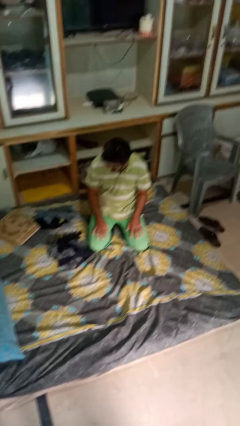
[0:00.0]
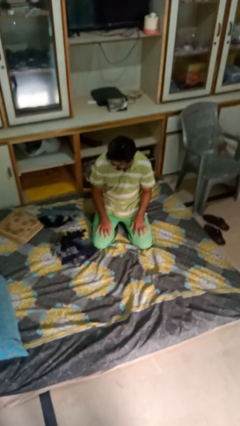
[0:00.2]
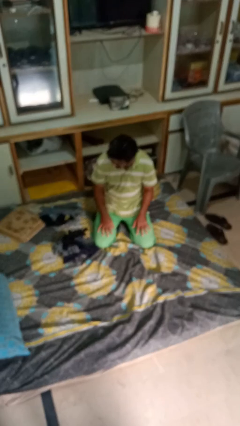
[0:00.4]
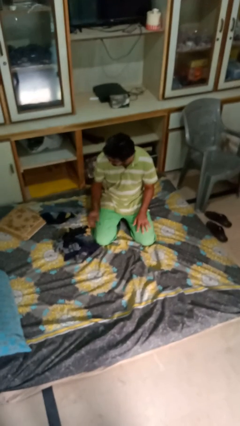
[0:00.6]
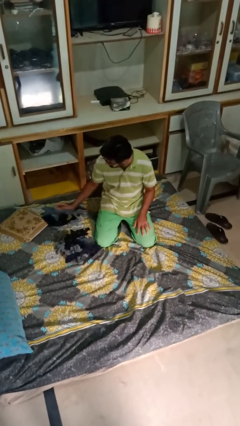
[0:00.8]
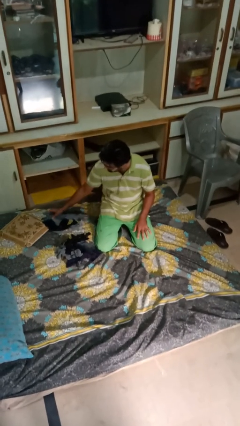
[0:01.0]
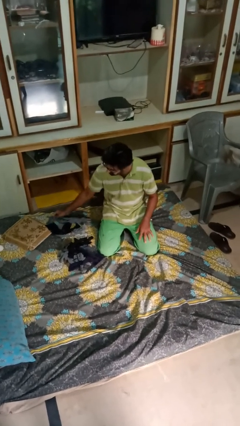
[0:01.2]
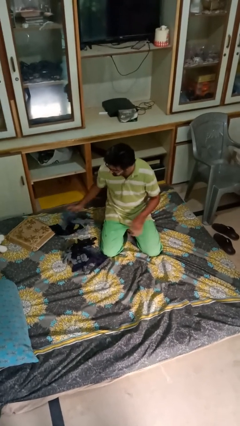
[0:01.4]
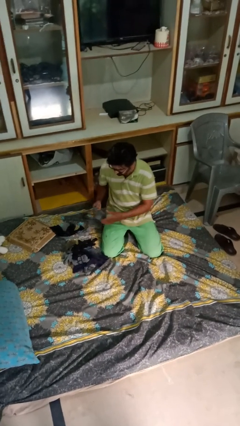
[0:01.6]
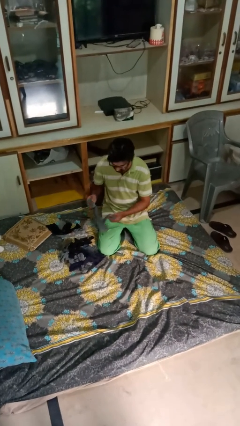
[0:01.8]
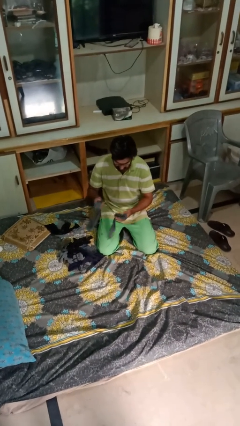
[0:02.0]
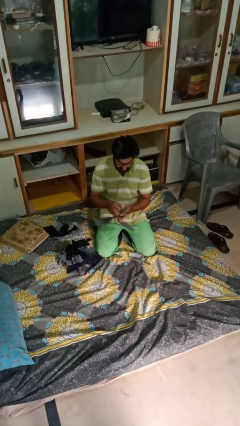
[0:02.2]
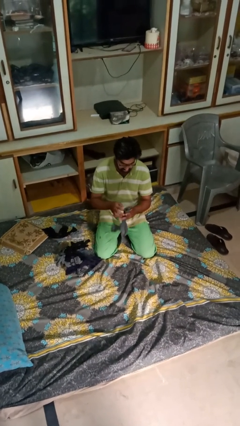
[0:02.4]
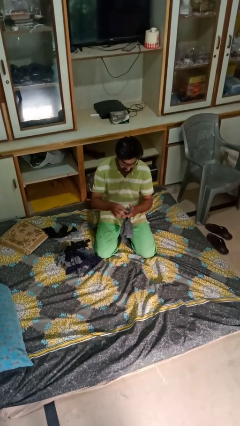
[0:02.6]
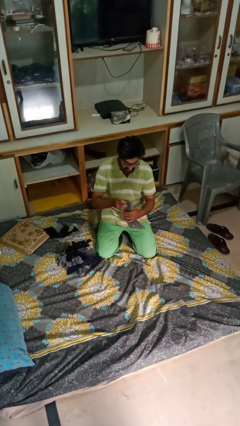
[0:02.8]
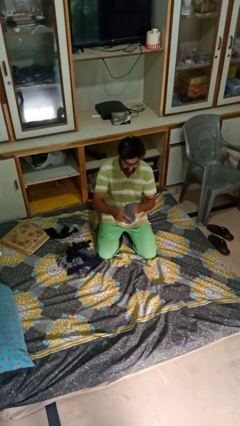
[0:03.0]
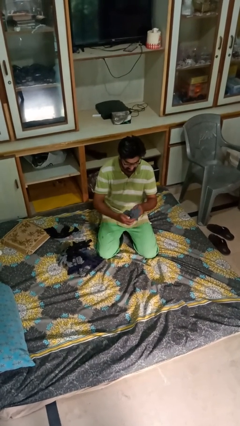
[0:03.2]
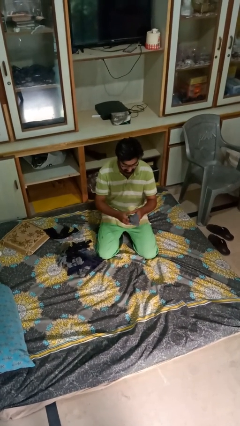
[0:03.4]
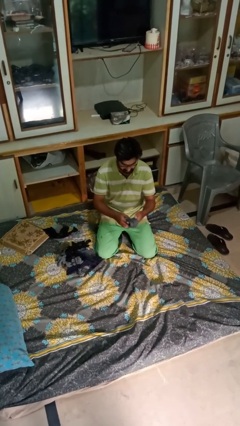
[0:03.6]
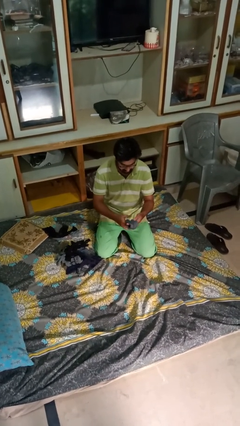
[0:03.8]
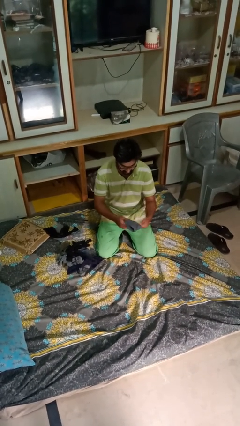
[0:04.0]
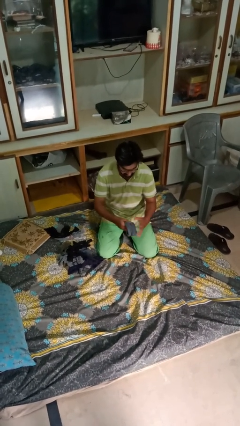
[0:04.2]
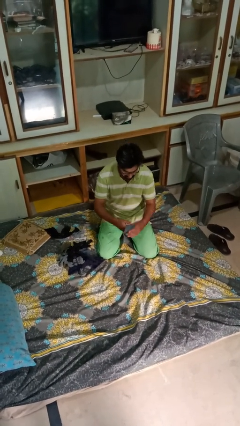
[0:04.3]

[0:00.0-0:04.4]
person folds socks

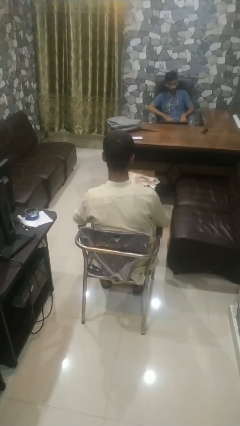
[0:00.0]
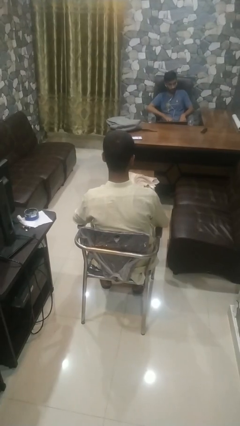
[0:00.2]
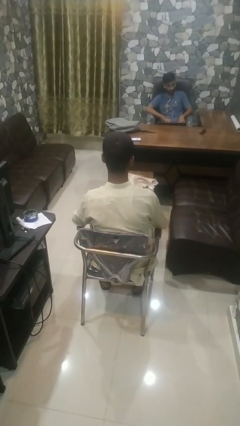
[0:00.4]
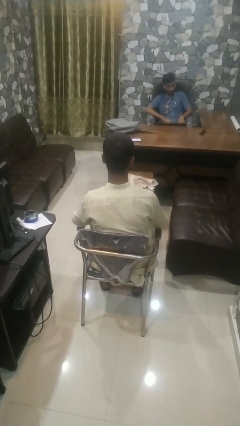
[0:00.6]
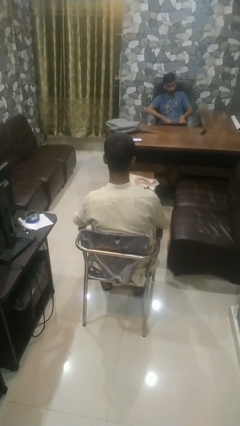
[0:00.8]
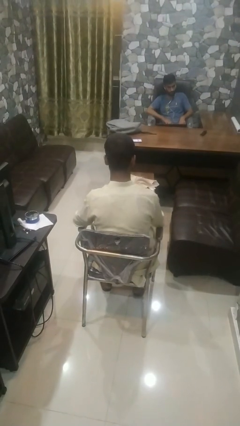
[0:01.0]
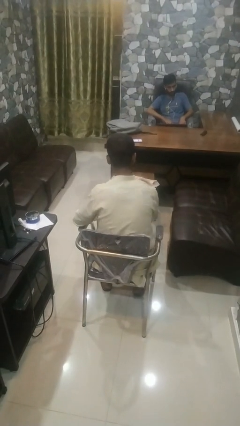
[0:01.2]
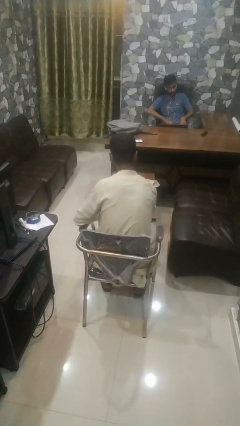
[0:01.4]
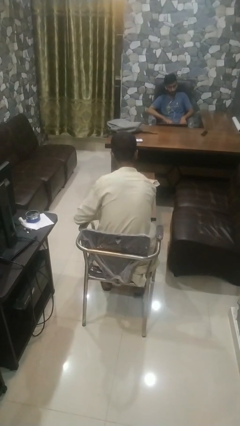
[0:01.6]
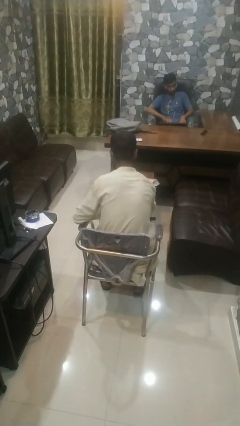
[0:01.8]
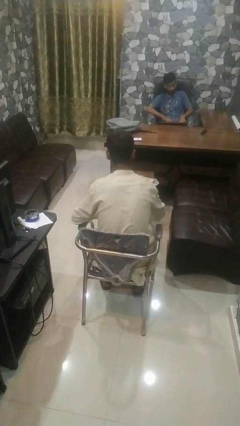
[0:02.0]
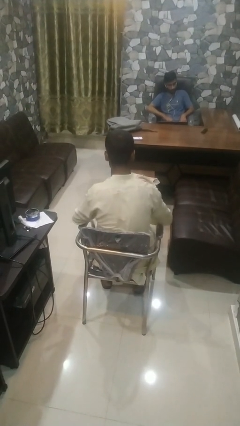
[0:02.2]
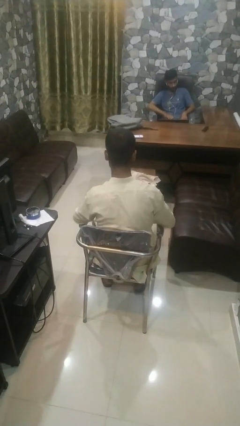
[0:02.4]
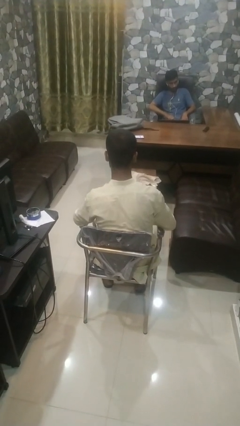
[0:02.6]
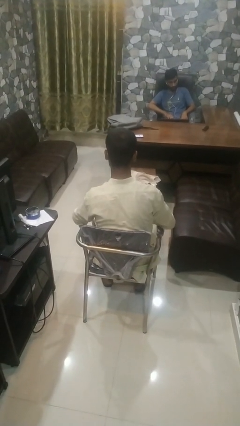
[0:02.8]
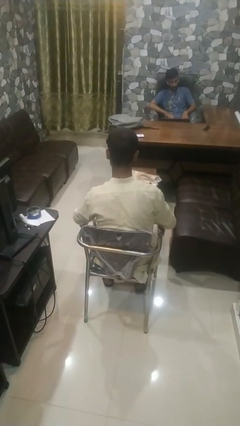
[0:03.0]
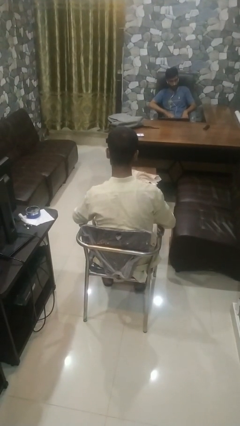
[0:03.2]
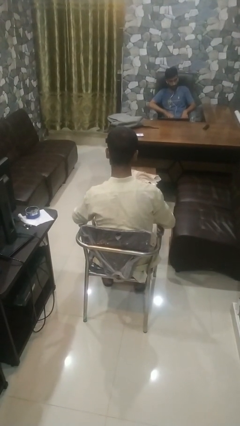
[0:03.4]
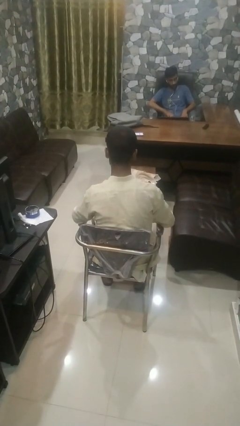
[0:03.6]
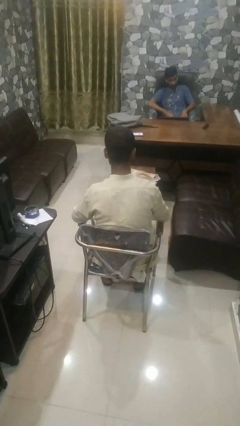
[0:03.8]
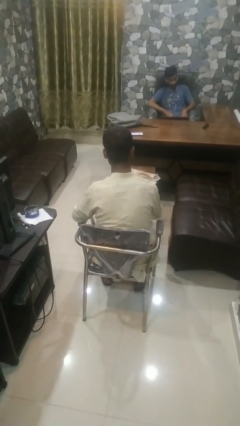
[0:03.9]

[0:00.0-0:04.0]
person paints fingernails

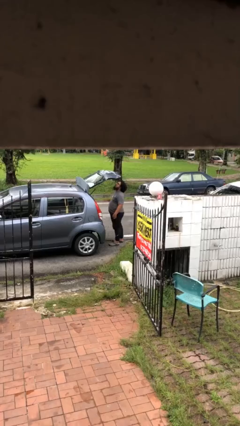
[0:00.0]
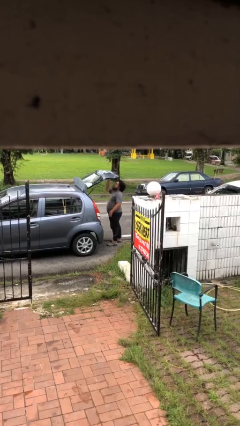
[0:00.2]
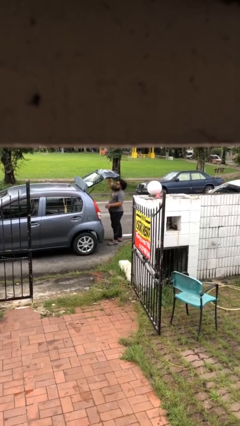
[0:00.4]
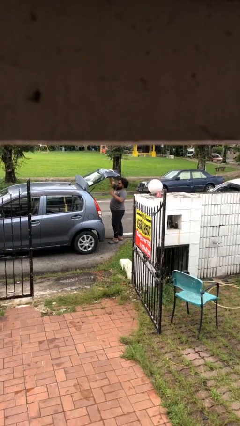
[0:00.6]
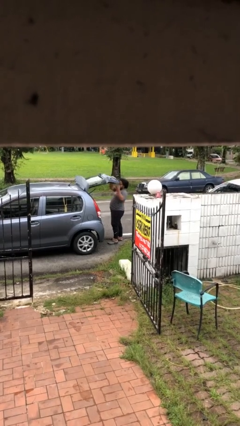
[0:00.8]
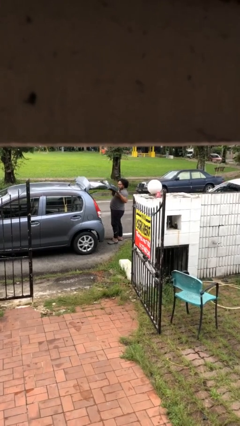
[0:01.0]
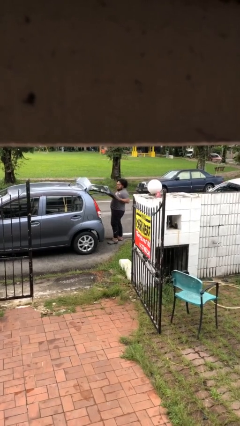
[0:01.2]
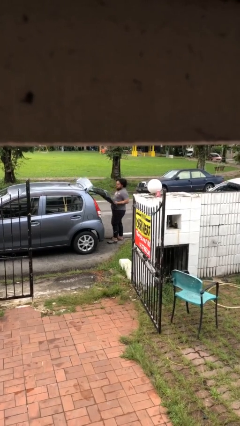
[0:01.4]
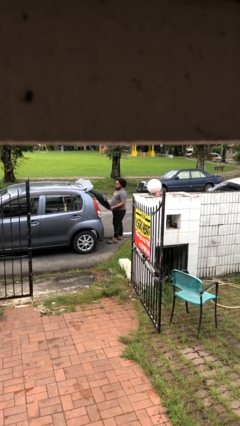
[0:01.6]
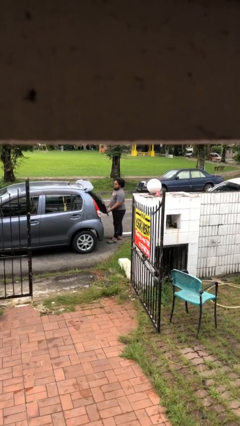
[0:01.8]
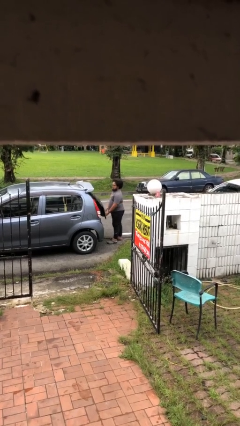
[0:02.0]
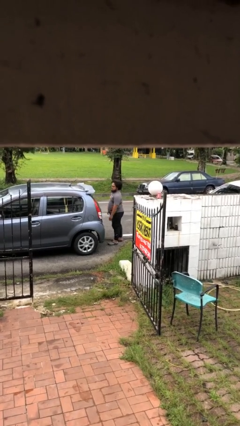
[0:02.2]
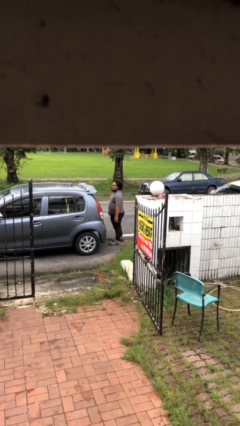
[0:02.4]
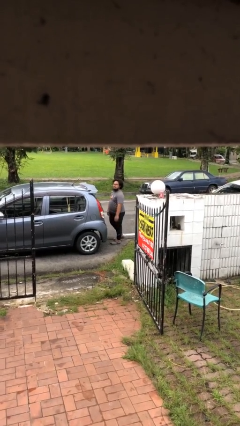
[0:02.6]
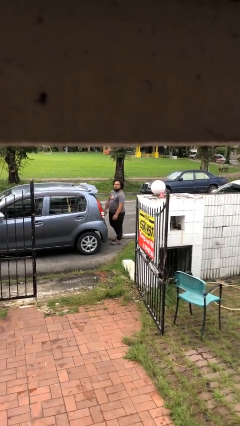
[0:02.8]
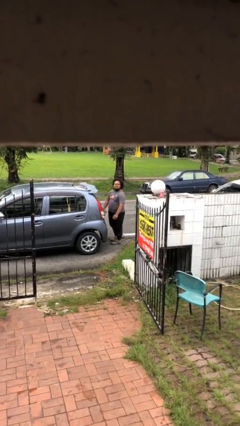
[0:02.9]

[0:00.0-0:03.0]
person closes car trunk

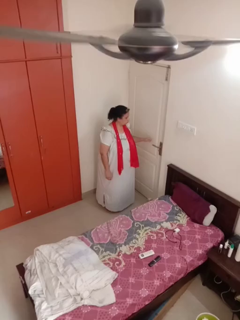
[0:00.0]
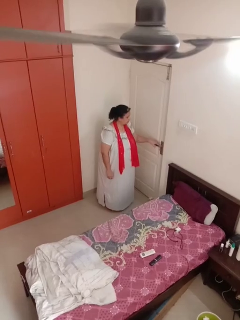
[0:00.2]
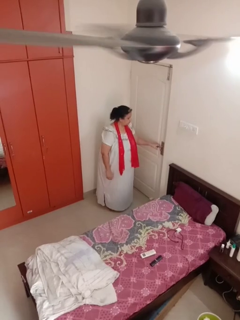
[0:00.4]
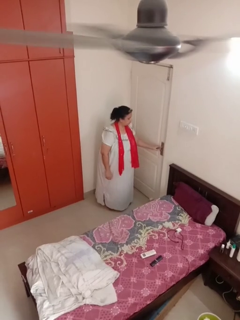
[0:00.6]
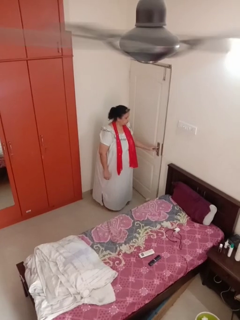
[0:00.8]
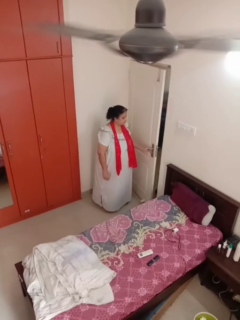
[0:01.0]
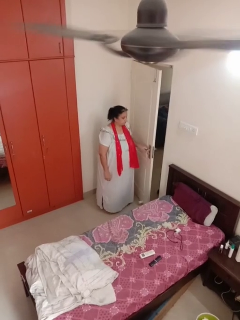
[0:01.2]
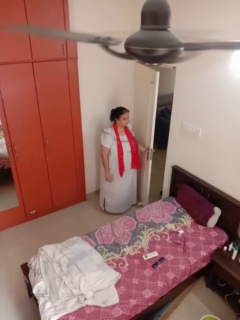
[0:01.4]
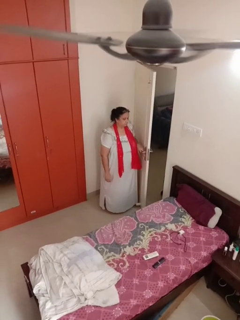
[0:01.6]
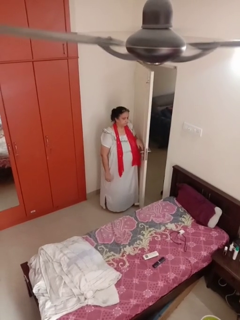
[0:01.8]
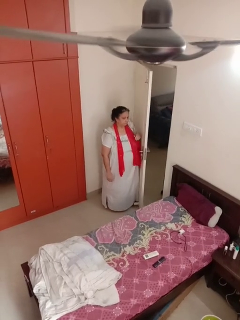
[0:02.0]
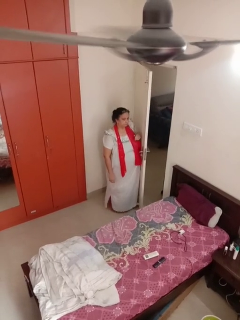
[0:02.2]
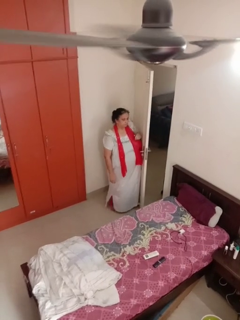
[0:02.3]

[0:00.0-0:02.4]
person opens facility door

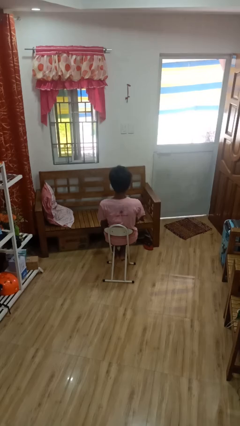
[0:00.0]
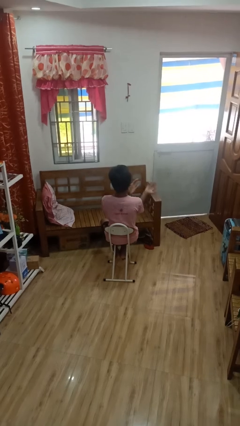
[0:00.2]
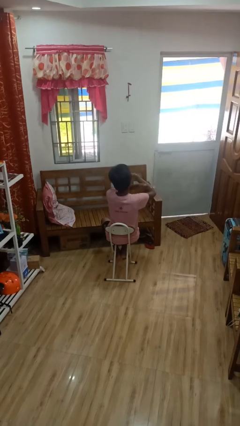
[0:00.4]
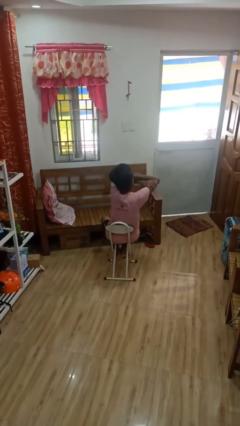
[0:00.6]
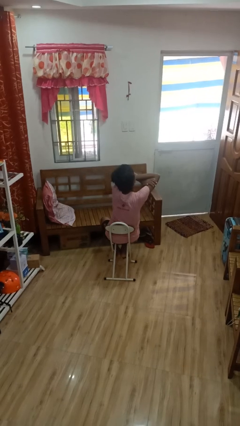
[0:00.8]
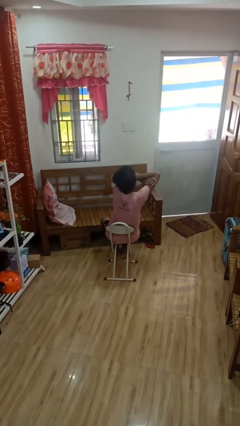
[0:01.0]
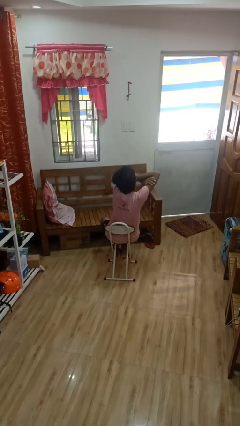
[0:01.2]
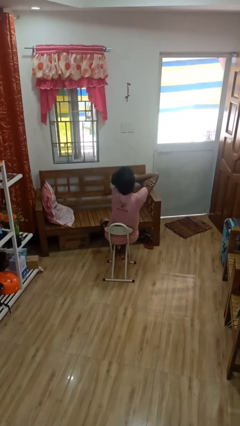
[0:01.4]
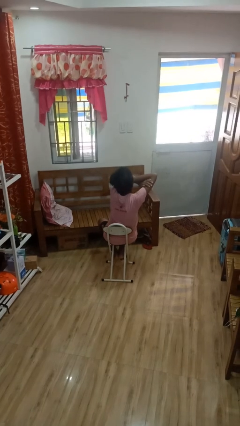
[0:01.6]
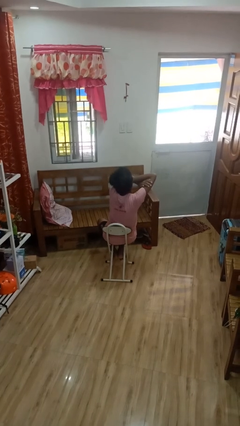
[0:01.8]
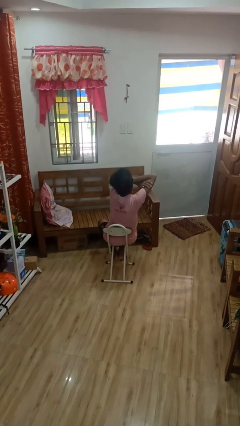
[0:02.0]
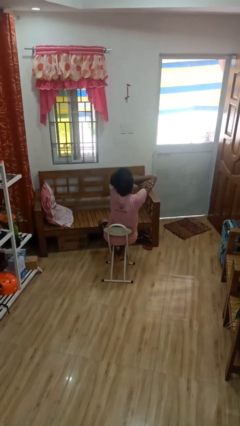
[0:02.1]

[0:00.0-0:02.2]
person gestures arms x

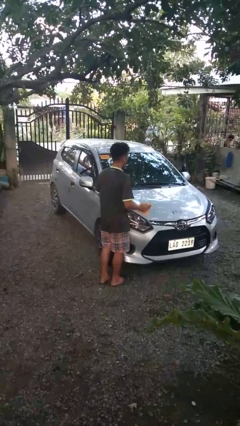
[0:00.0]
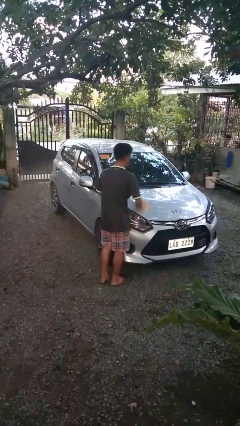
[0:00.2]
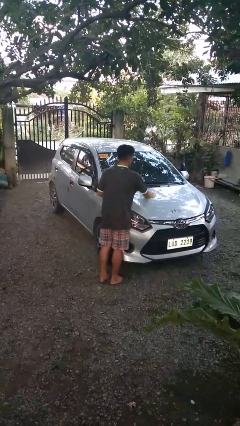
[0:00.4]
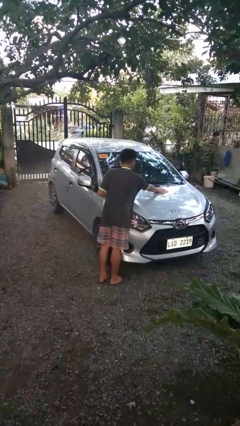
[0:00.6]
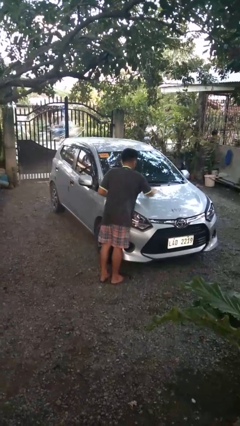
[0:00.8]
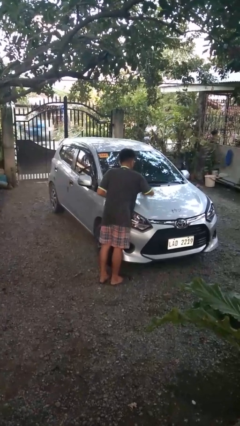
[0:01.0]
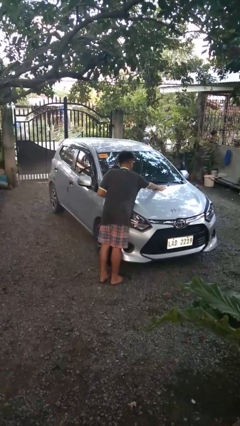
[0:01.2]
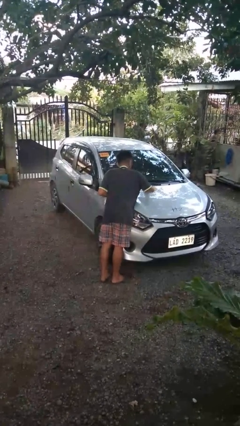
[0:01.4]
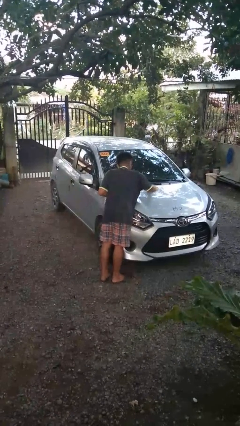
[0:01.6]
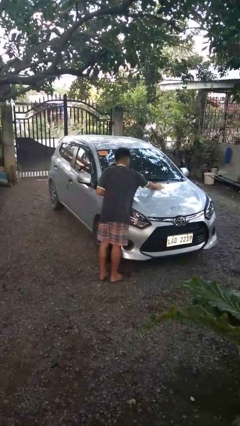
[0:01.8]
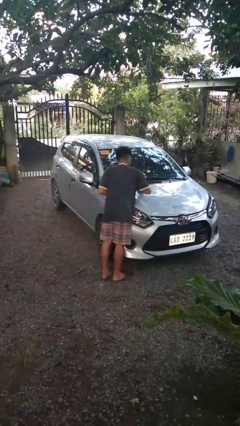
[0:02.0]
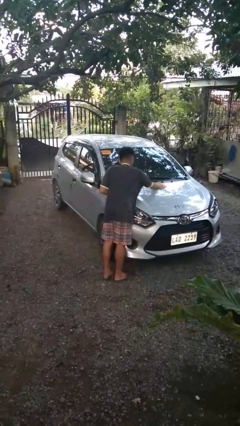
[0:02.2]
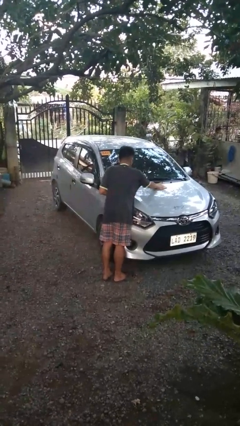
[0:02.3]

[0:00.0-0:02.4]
person polishes car with rag
